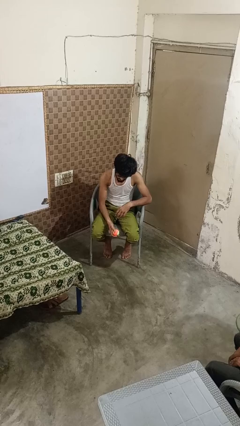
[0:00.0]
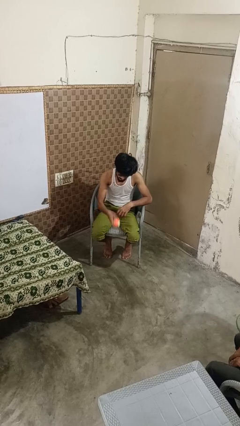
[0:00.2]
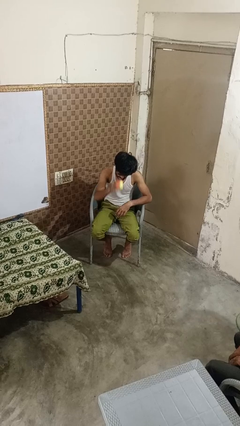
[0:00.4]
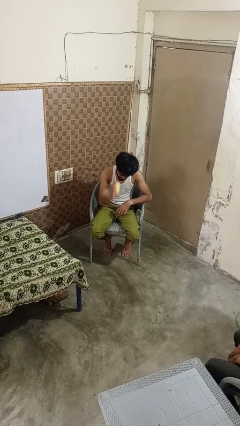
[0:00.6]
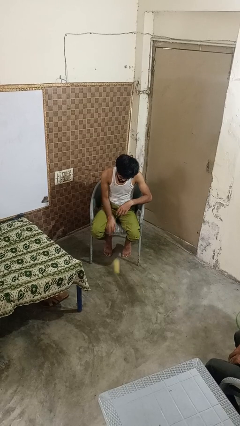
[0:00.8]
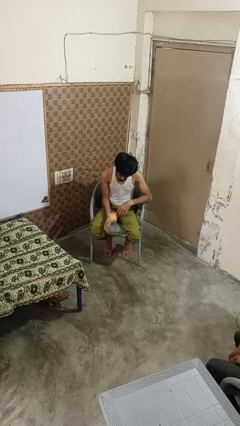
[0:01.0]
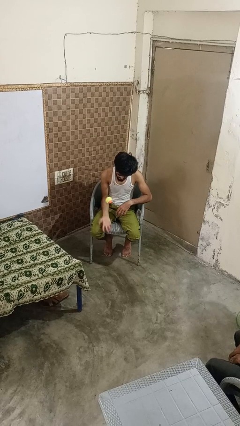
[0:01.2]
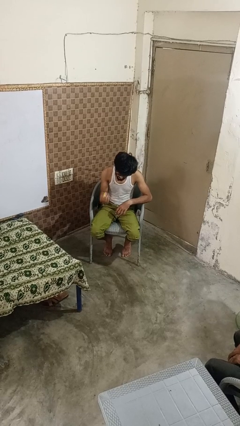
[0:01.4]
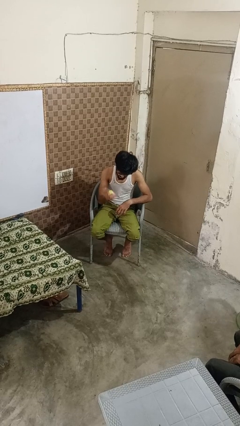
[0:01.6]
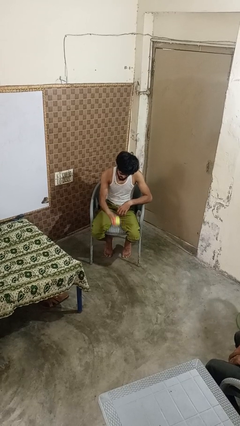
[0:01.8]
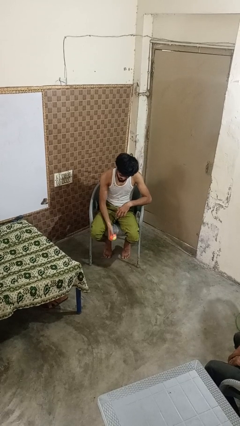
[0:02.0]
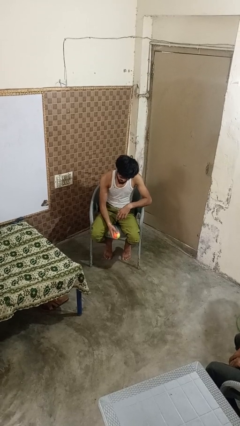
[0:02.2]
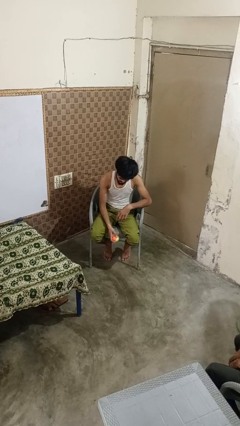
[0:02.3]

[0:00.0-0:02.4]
person bounces ball on floor

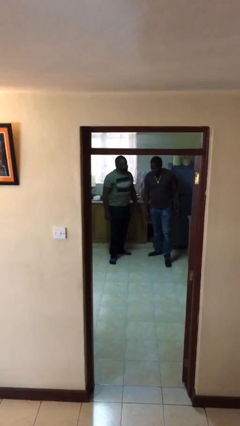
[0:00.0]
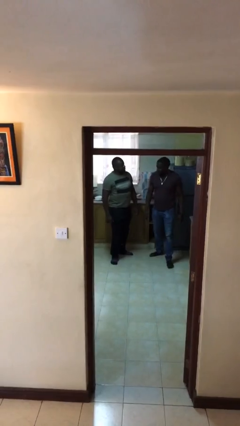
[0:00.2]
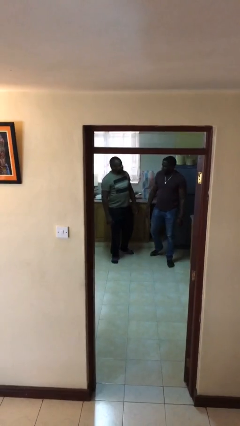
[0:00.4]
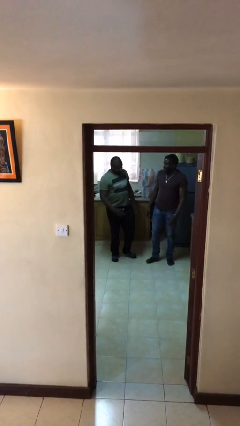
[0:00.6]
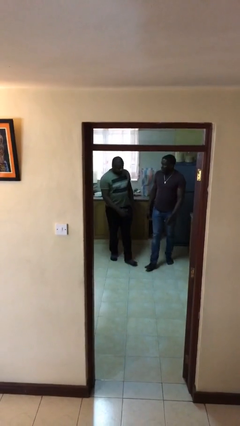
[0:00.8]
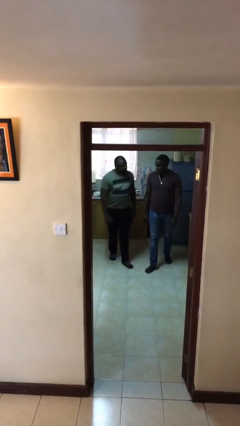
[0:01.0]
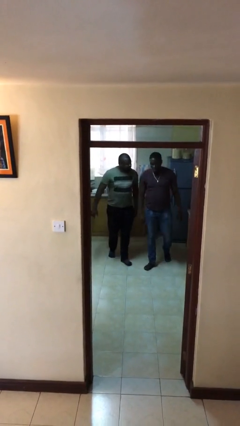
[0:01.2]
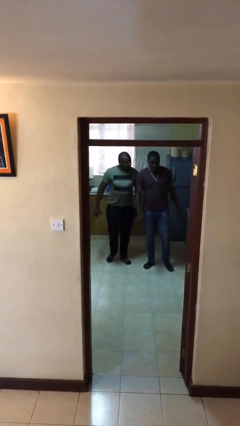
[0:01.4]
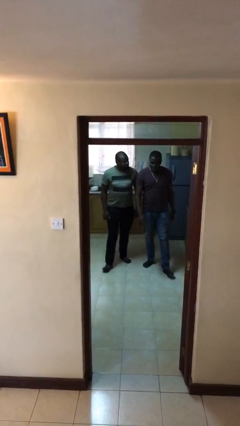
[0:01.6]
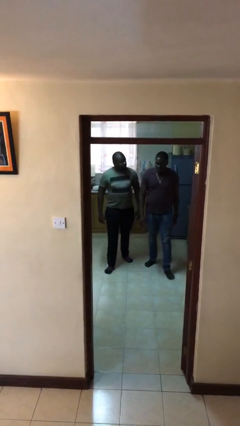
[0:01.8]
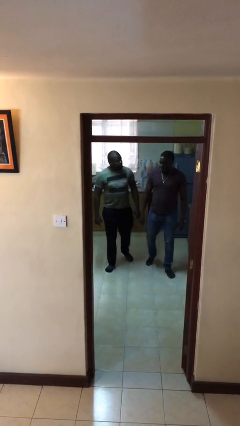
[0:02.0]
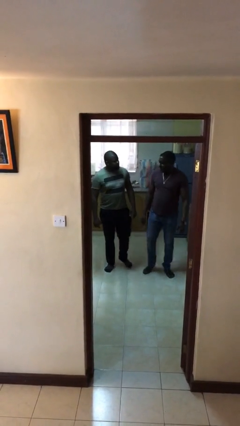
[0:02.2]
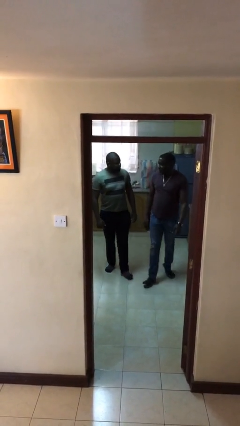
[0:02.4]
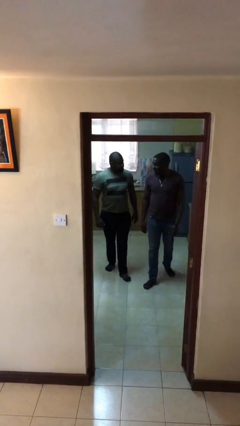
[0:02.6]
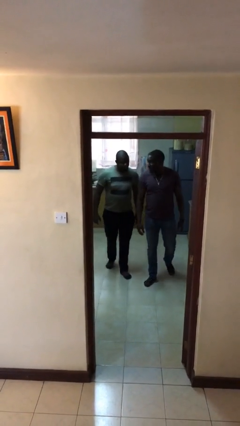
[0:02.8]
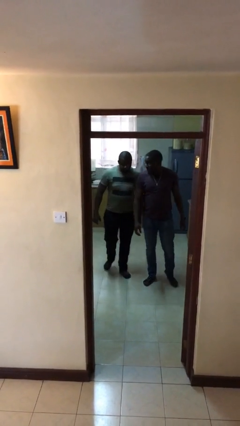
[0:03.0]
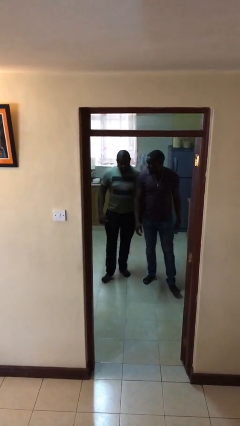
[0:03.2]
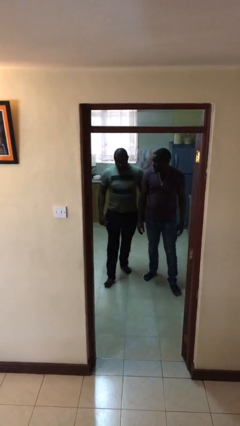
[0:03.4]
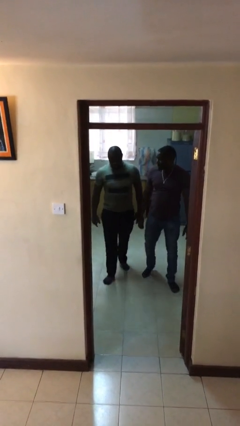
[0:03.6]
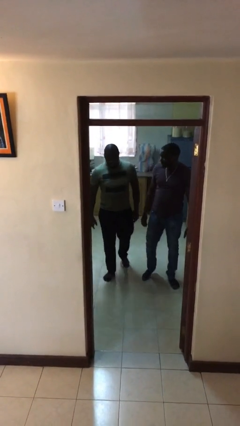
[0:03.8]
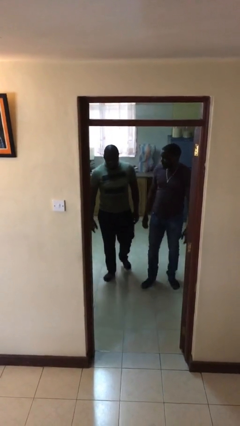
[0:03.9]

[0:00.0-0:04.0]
person talks to person

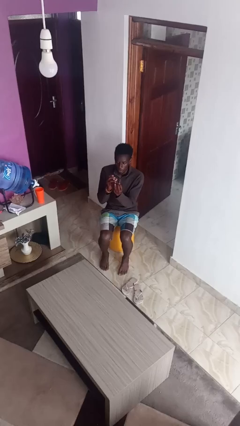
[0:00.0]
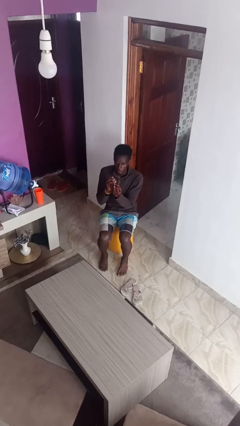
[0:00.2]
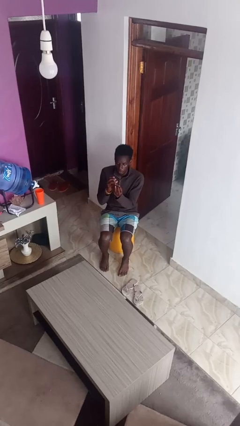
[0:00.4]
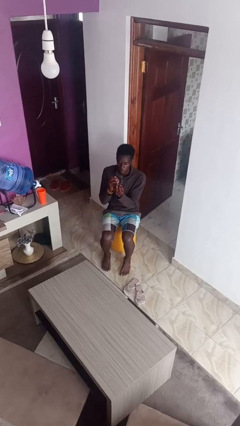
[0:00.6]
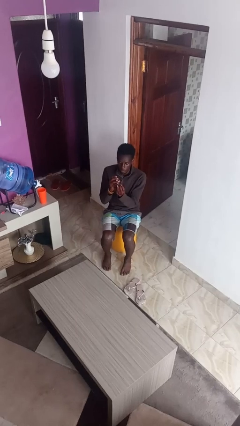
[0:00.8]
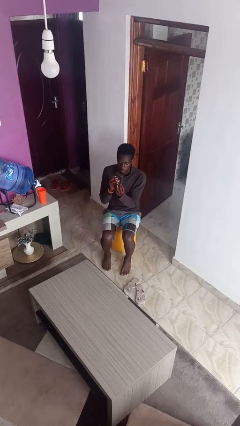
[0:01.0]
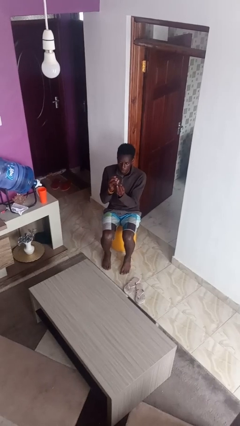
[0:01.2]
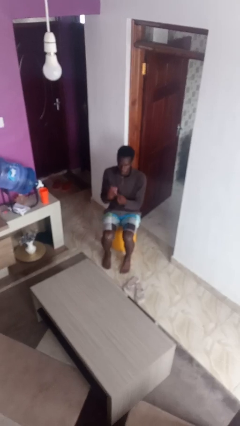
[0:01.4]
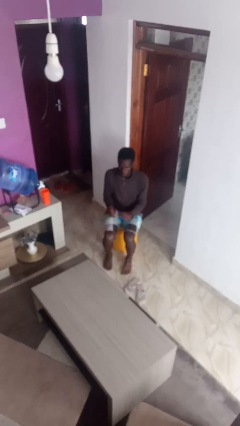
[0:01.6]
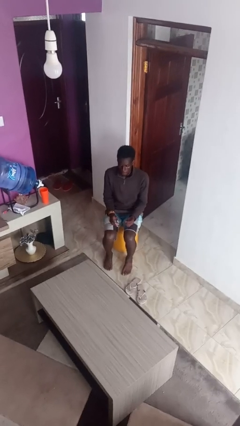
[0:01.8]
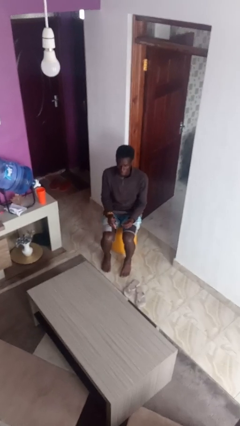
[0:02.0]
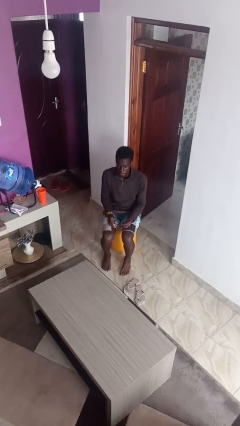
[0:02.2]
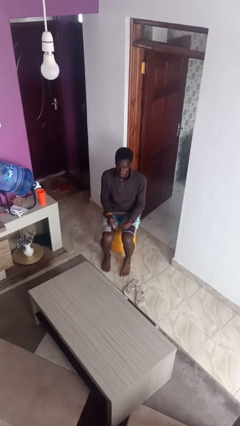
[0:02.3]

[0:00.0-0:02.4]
person clips fingernails

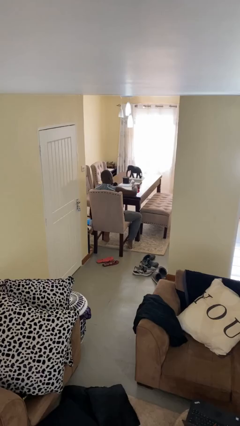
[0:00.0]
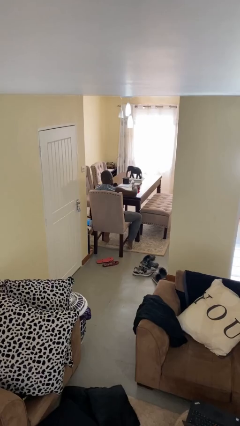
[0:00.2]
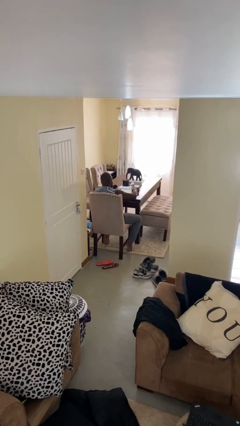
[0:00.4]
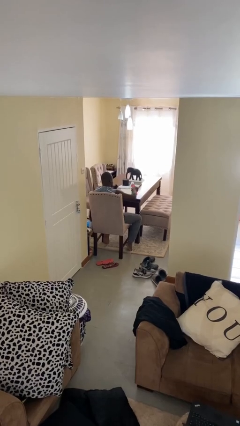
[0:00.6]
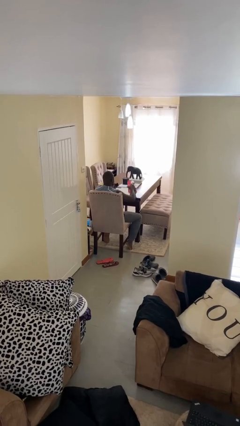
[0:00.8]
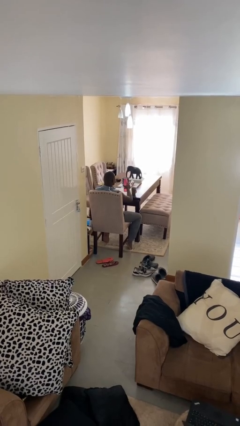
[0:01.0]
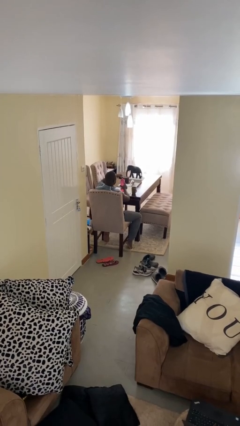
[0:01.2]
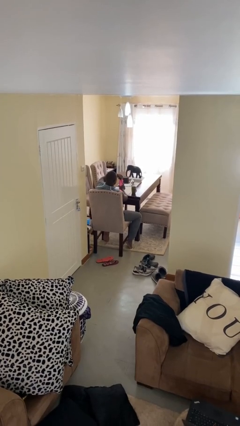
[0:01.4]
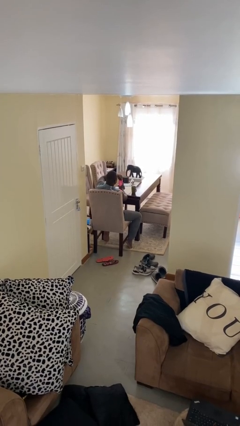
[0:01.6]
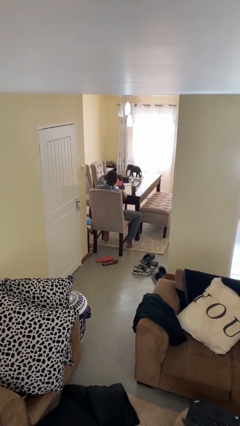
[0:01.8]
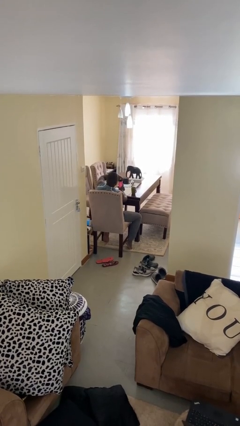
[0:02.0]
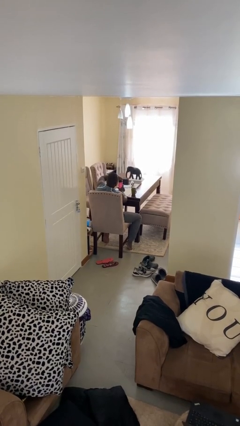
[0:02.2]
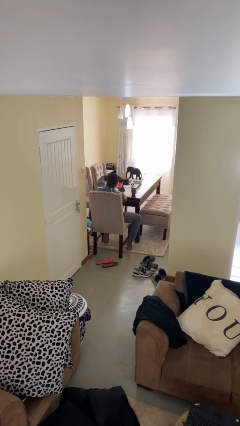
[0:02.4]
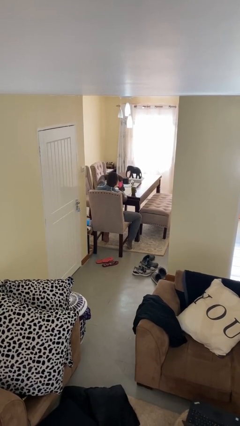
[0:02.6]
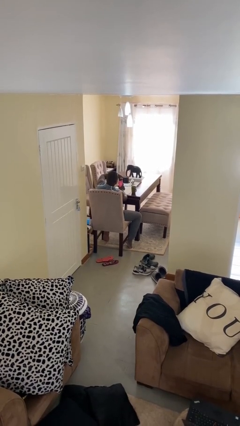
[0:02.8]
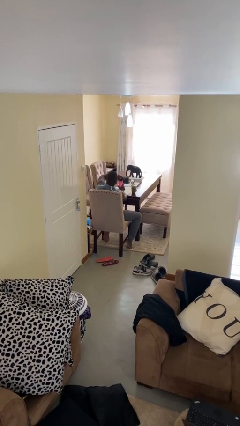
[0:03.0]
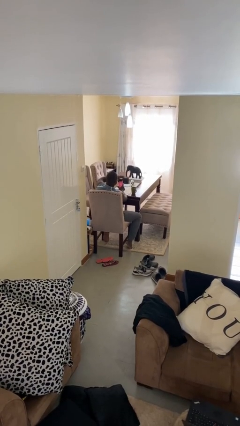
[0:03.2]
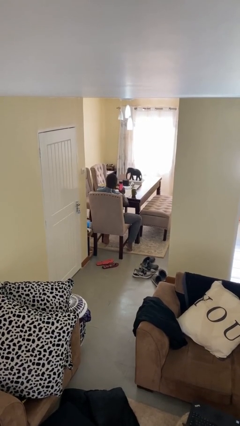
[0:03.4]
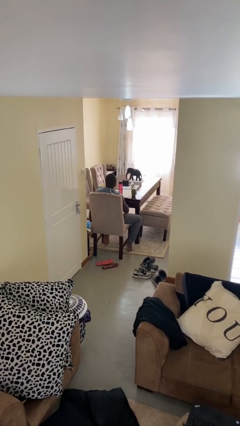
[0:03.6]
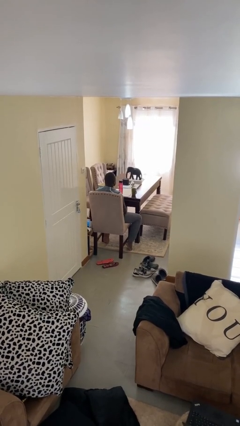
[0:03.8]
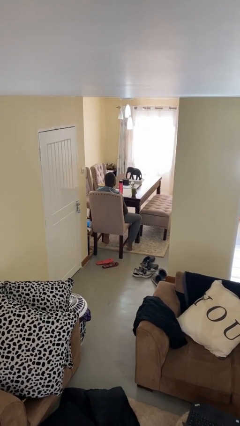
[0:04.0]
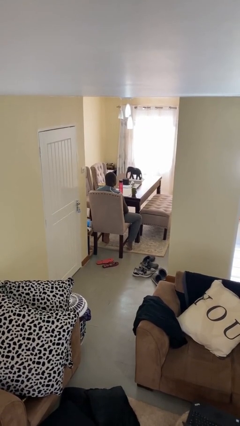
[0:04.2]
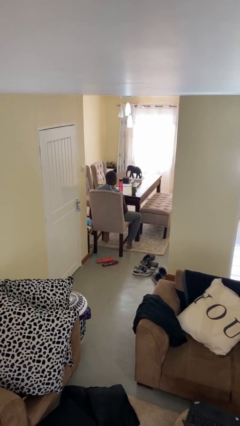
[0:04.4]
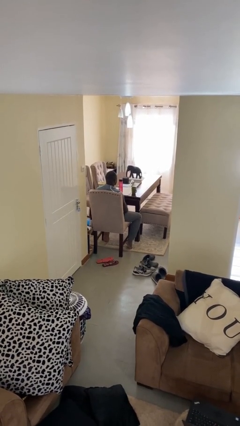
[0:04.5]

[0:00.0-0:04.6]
person screws lid to bottle

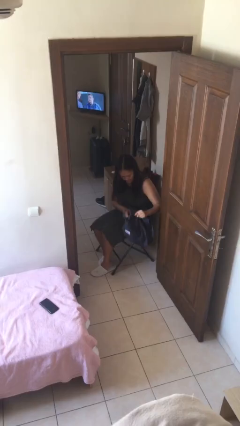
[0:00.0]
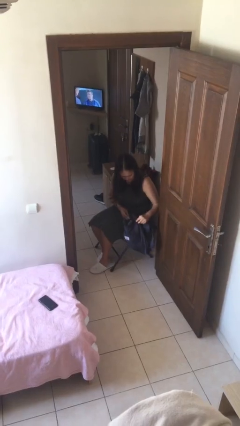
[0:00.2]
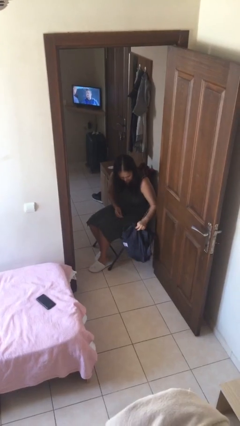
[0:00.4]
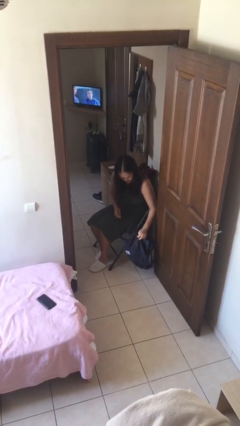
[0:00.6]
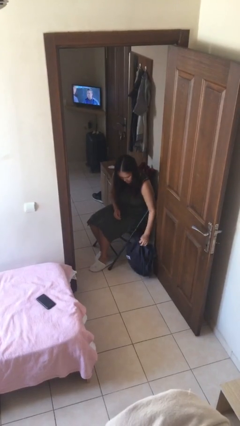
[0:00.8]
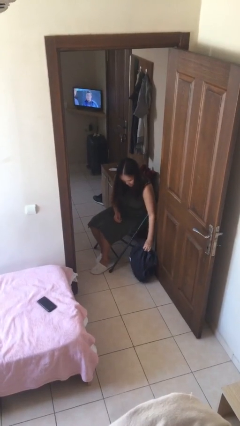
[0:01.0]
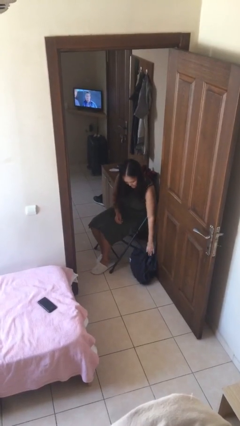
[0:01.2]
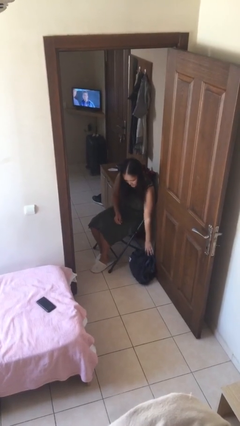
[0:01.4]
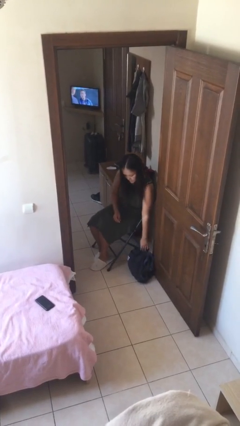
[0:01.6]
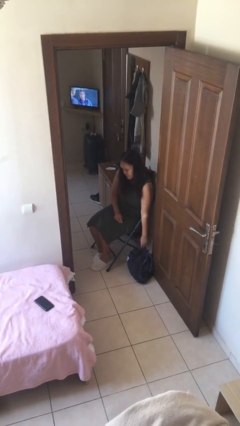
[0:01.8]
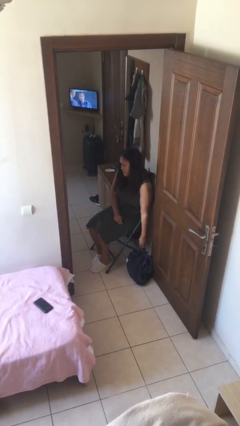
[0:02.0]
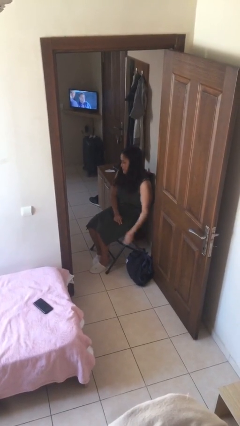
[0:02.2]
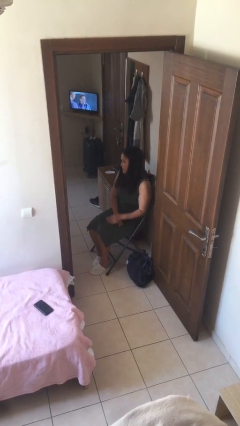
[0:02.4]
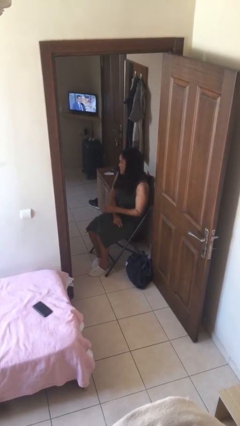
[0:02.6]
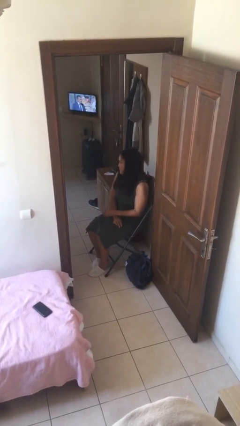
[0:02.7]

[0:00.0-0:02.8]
person puts down object on floor

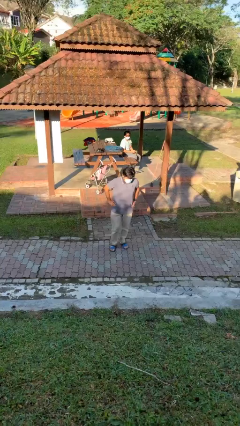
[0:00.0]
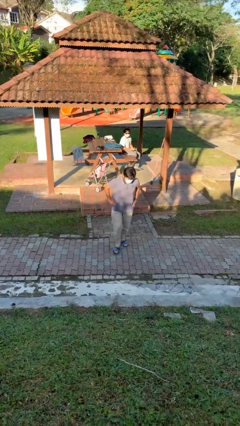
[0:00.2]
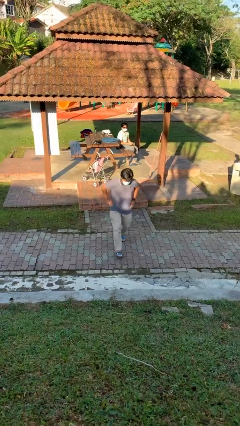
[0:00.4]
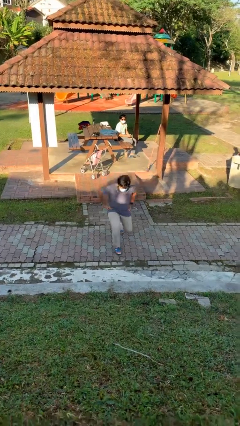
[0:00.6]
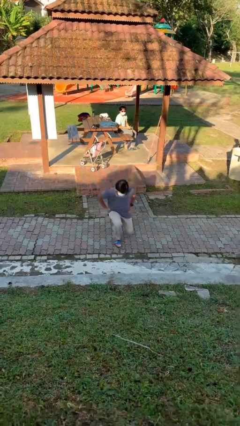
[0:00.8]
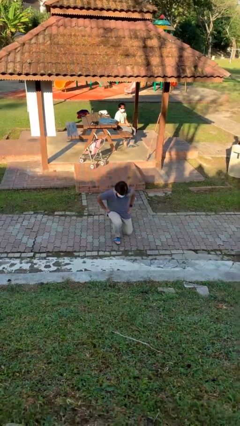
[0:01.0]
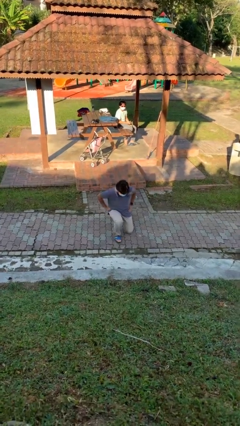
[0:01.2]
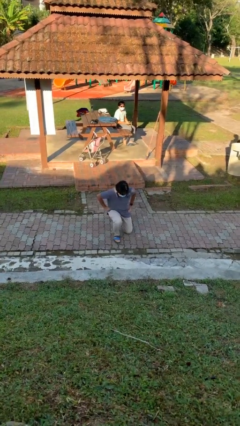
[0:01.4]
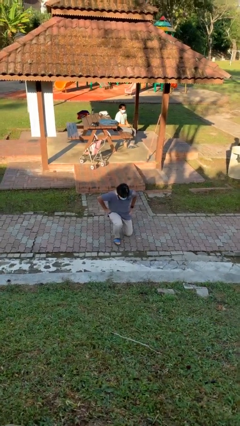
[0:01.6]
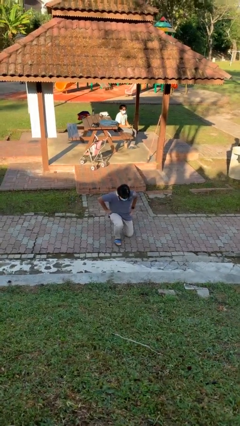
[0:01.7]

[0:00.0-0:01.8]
person kneels
